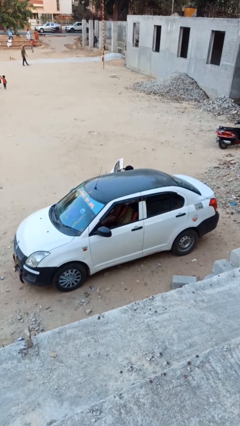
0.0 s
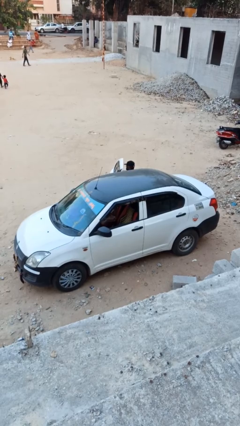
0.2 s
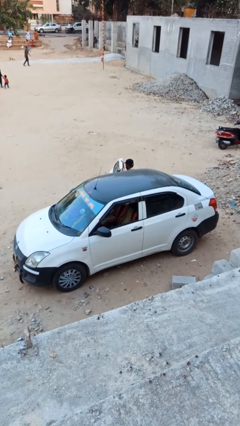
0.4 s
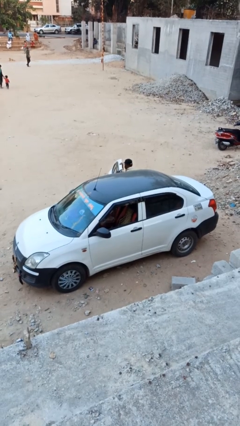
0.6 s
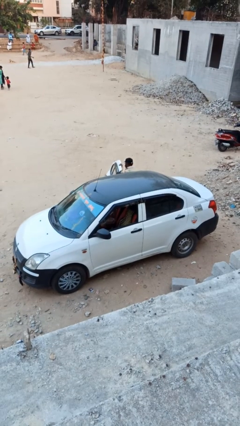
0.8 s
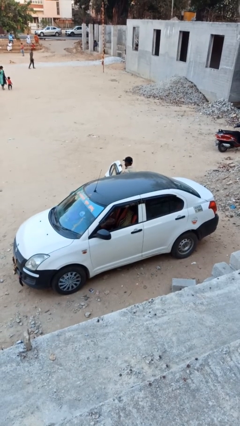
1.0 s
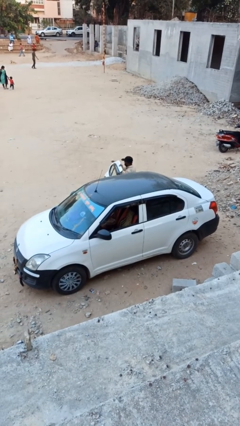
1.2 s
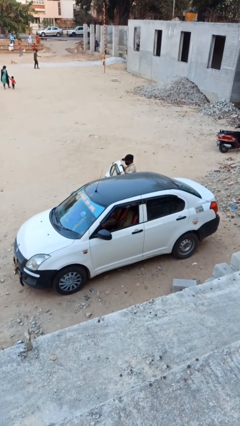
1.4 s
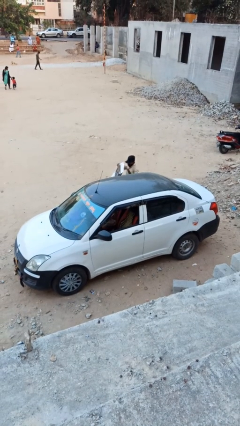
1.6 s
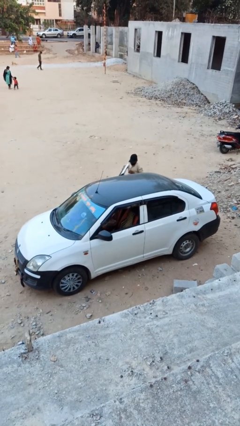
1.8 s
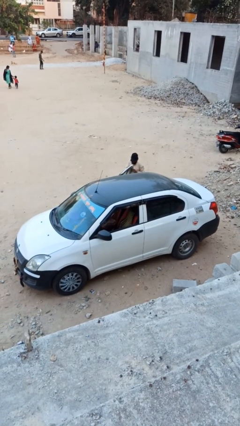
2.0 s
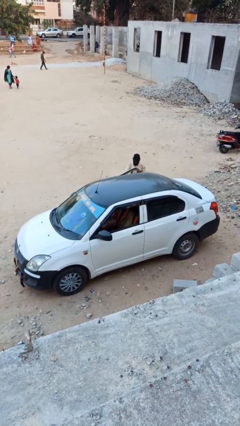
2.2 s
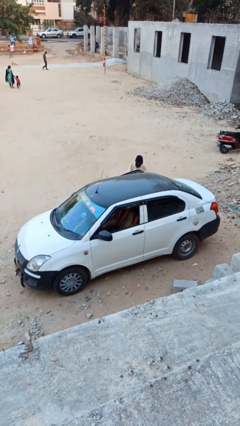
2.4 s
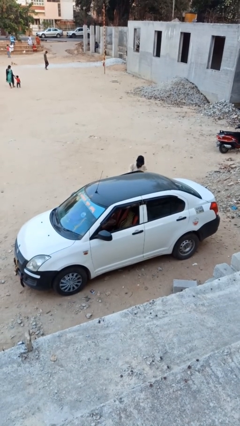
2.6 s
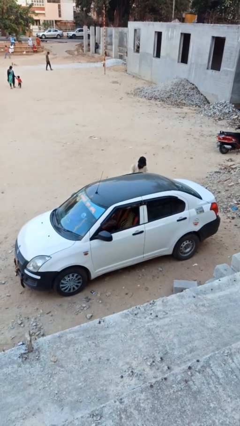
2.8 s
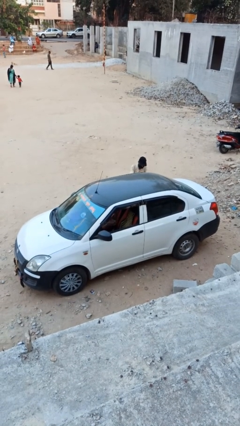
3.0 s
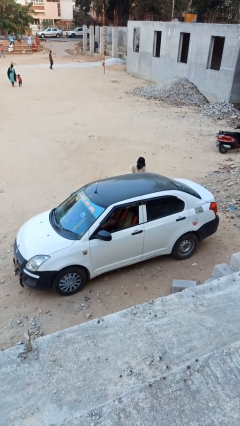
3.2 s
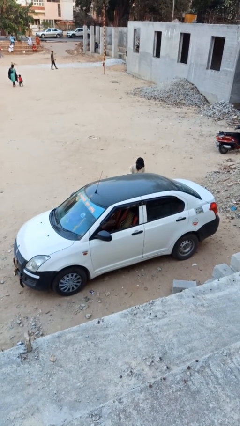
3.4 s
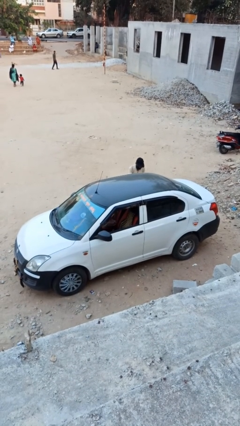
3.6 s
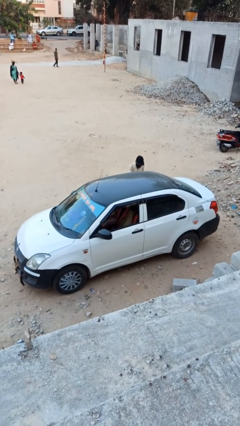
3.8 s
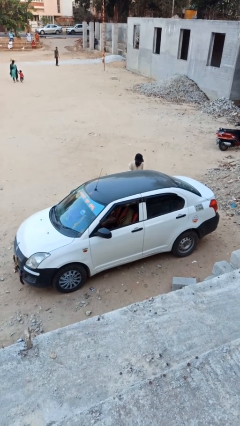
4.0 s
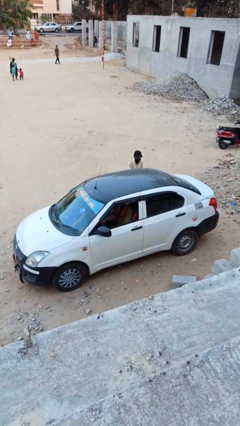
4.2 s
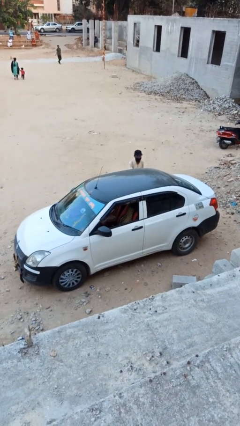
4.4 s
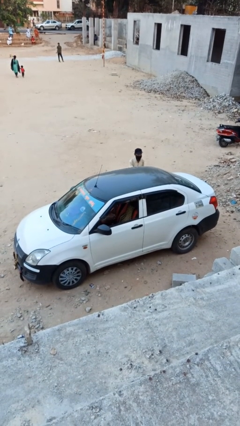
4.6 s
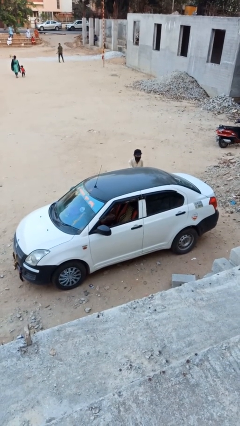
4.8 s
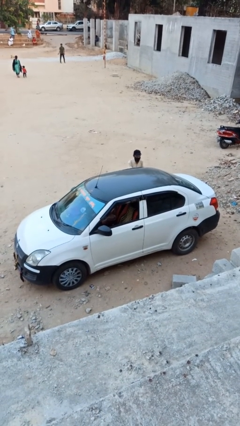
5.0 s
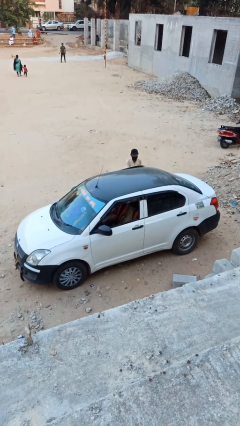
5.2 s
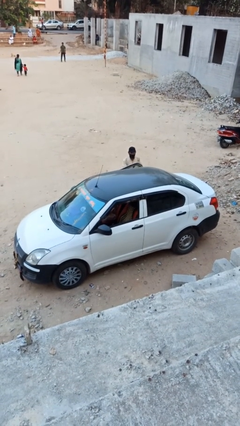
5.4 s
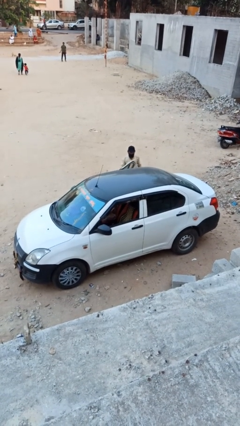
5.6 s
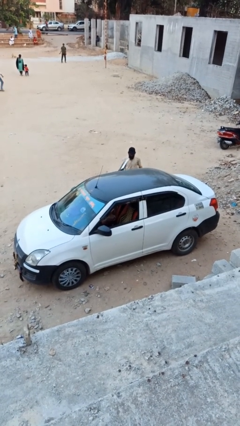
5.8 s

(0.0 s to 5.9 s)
car drops off person

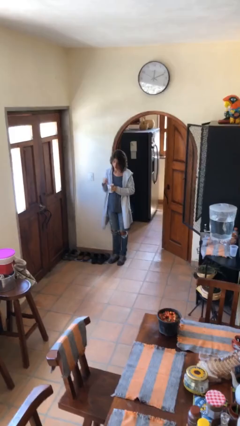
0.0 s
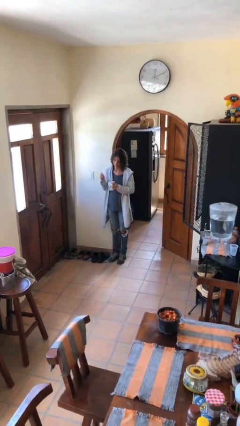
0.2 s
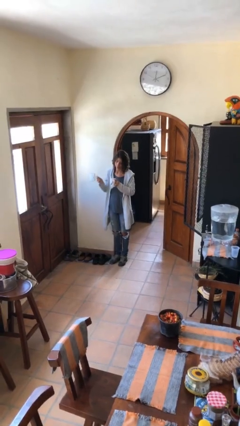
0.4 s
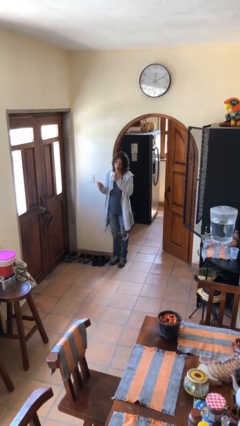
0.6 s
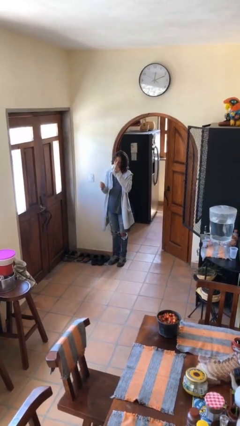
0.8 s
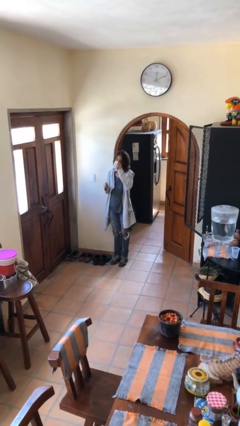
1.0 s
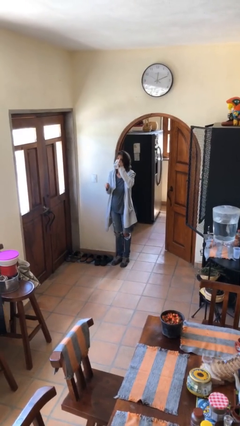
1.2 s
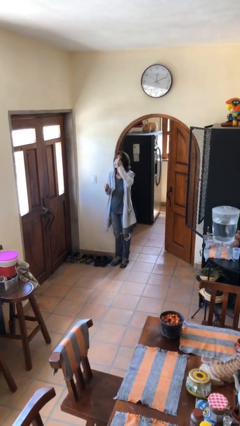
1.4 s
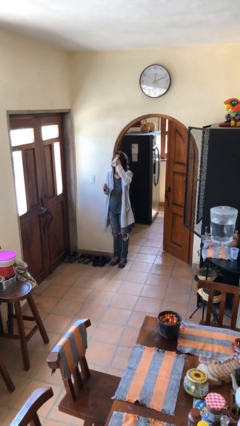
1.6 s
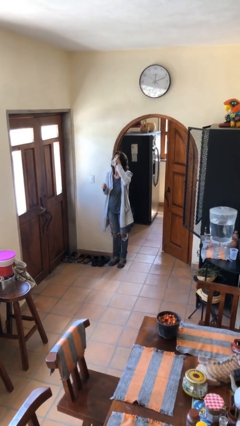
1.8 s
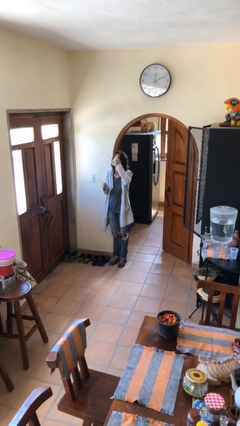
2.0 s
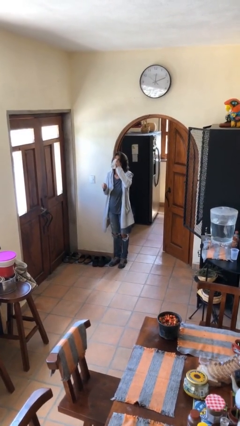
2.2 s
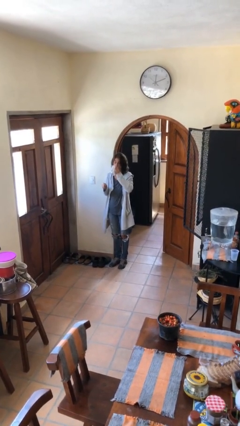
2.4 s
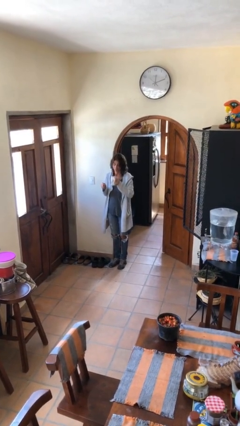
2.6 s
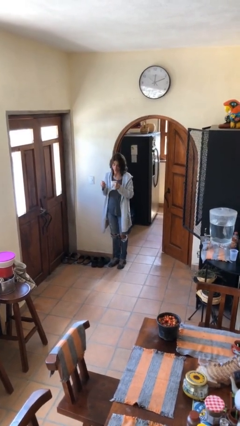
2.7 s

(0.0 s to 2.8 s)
person drinks from mug

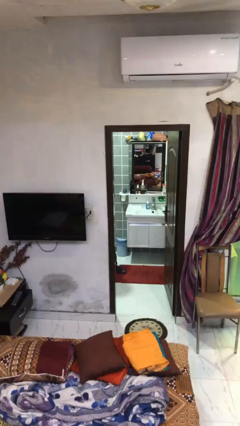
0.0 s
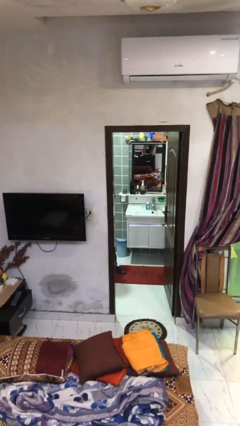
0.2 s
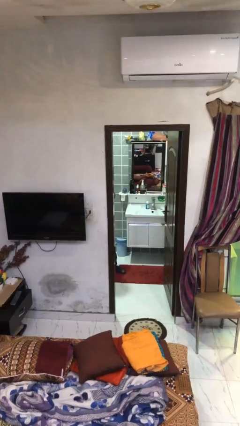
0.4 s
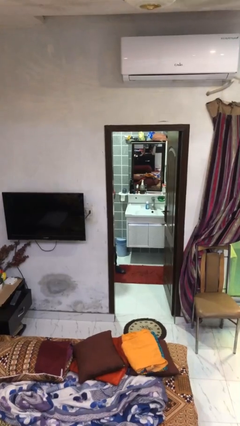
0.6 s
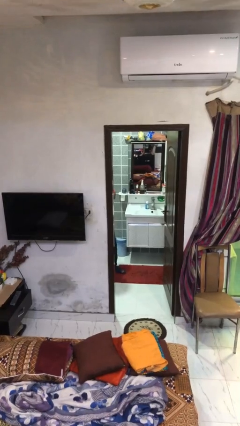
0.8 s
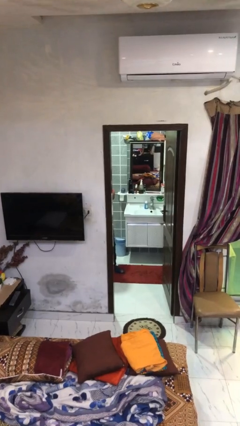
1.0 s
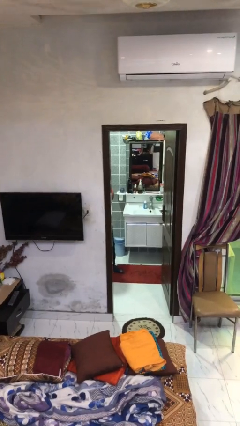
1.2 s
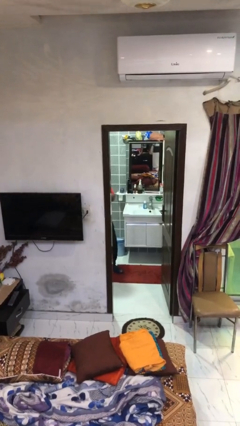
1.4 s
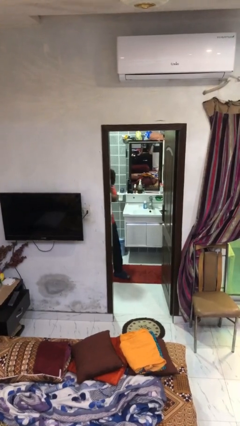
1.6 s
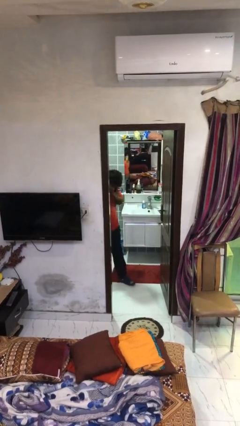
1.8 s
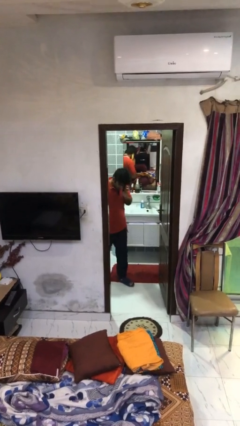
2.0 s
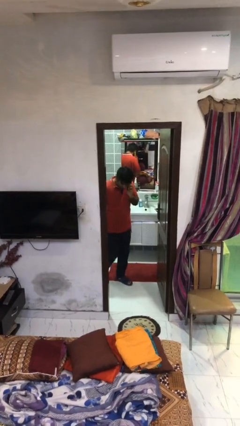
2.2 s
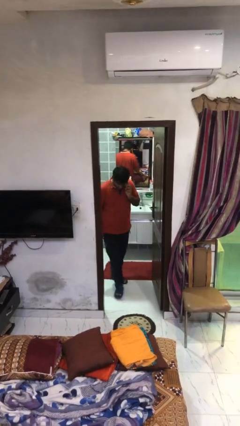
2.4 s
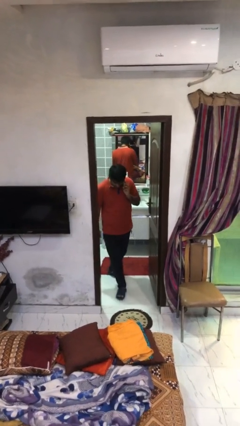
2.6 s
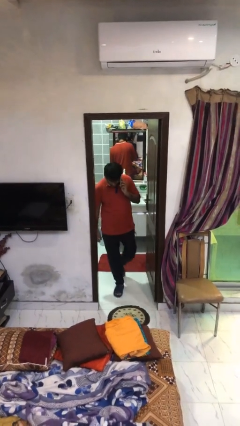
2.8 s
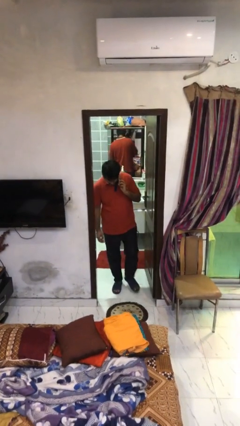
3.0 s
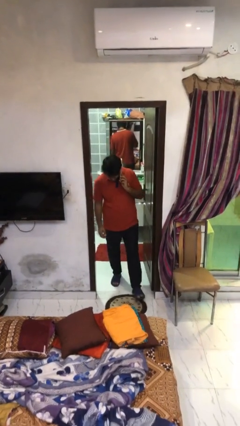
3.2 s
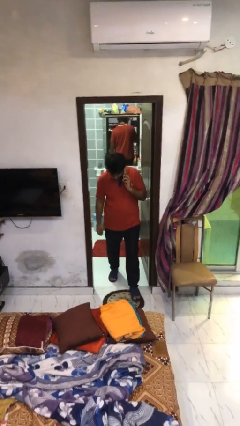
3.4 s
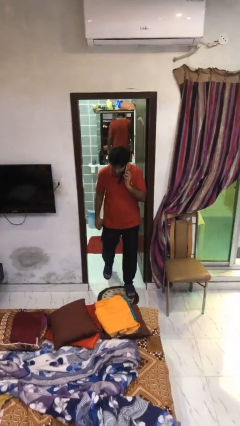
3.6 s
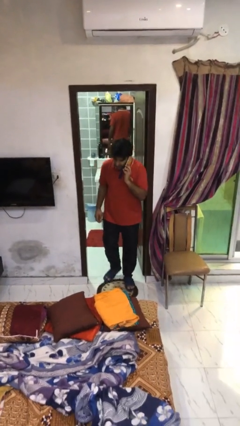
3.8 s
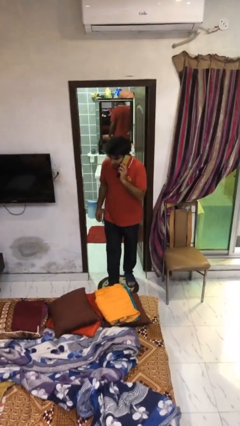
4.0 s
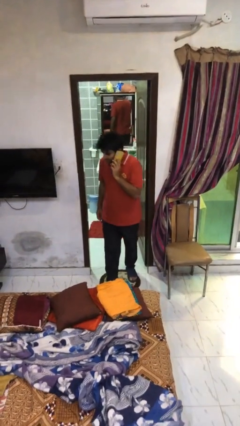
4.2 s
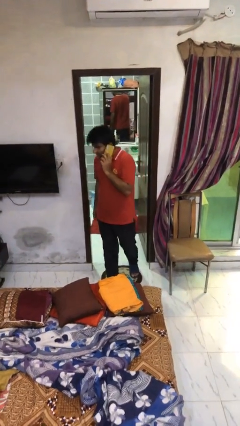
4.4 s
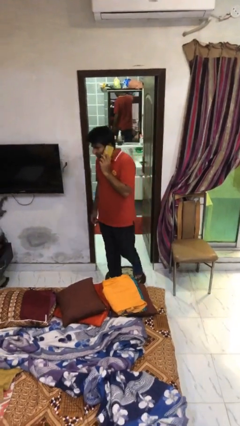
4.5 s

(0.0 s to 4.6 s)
person enters scene through structure

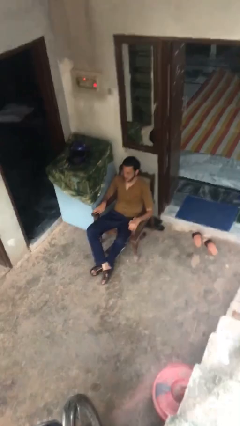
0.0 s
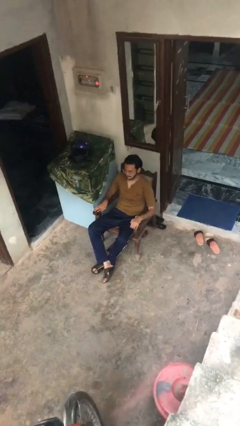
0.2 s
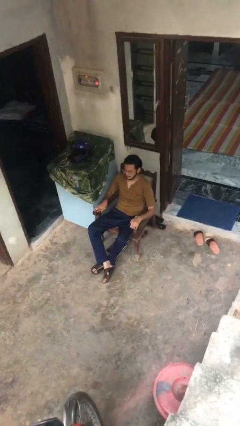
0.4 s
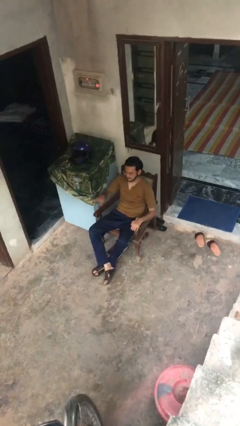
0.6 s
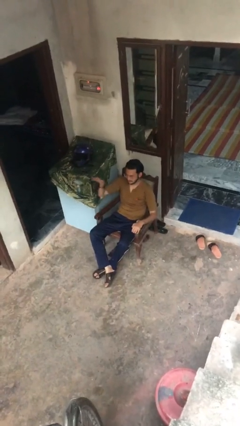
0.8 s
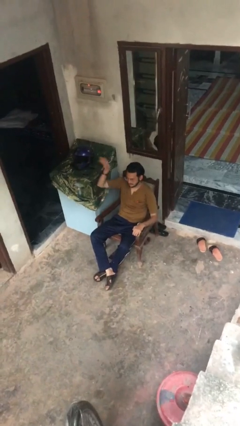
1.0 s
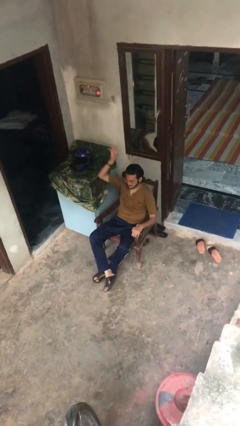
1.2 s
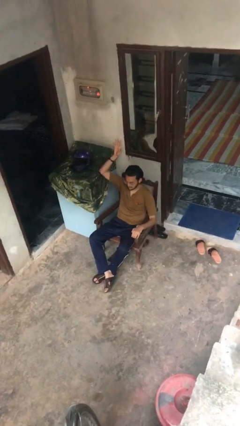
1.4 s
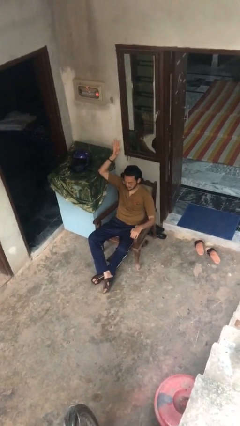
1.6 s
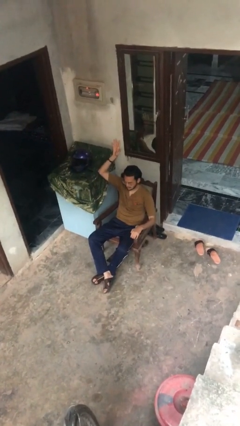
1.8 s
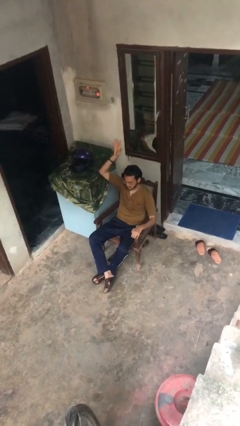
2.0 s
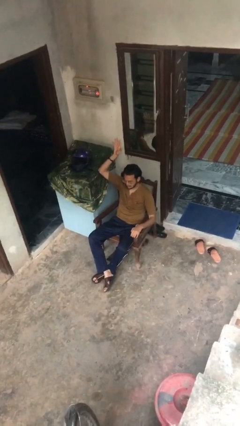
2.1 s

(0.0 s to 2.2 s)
person gestures raise hand

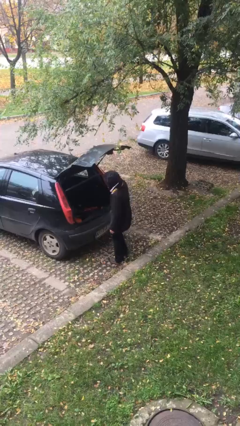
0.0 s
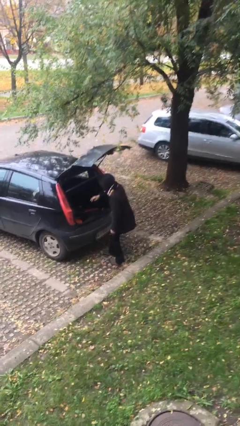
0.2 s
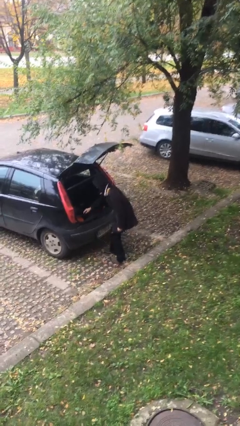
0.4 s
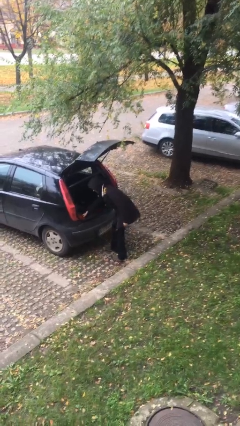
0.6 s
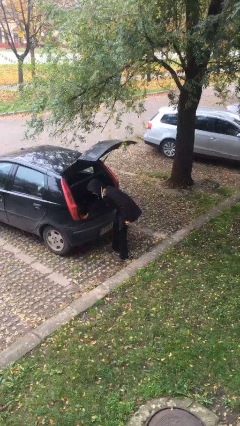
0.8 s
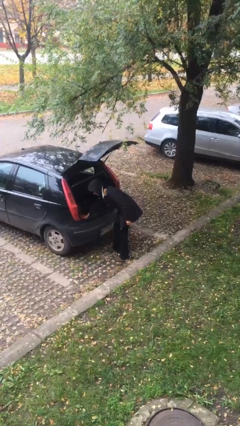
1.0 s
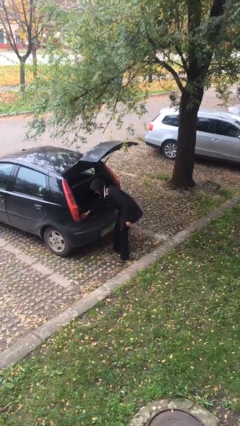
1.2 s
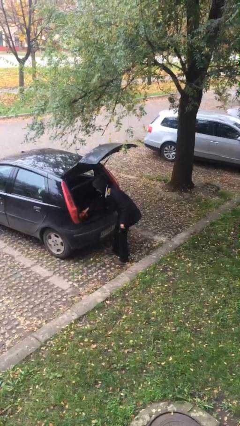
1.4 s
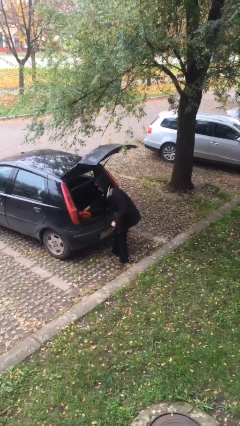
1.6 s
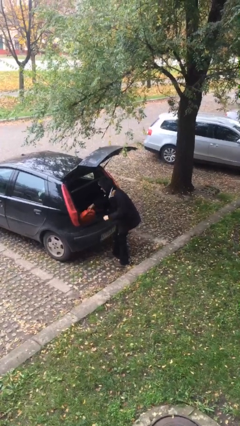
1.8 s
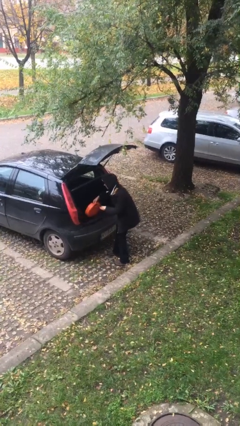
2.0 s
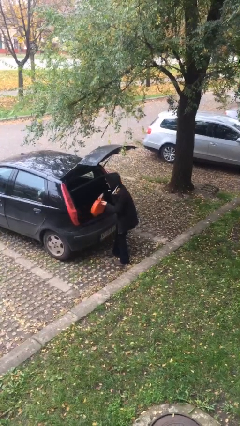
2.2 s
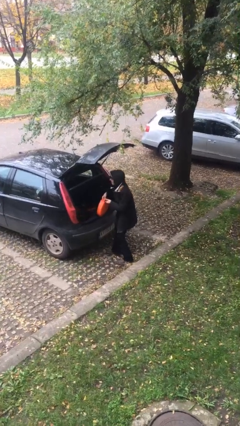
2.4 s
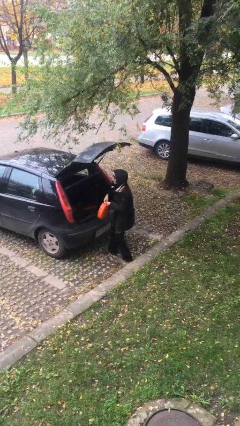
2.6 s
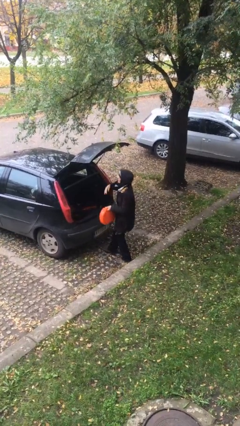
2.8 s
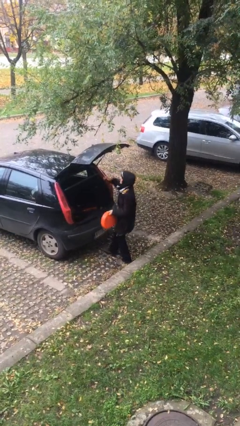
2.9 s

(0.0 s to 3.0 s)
person unloads car
